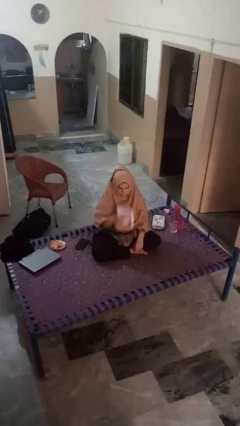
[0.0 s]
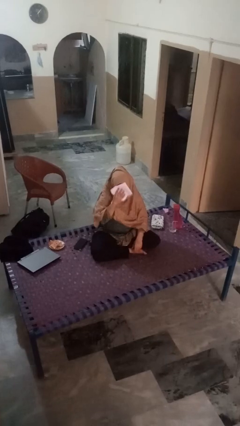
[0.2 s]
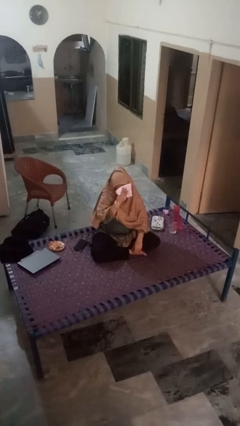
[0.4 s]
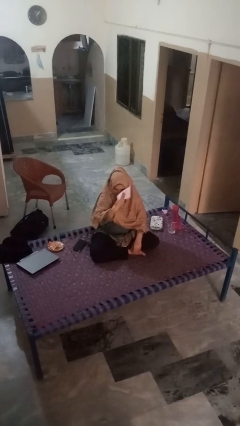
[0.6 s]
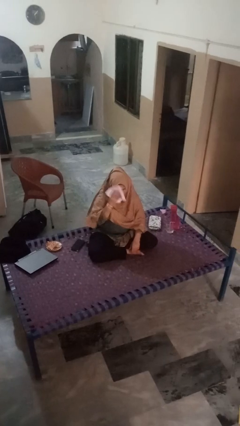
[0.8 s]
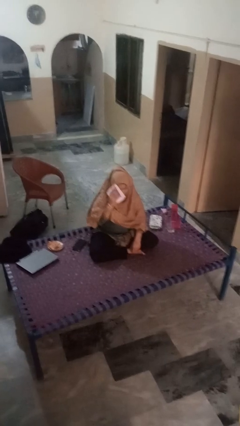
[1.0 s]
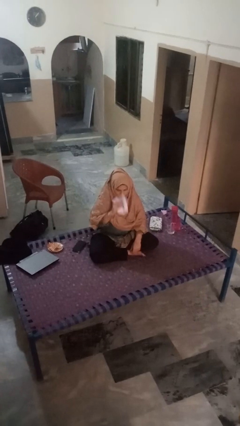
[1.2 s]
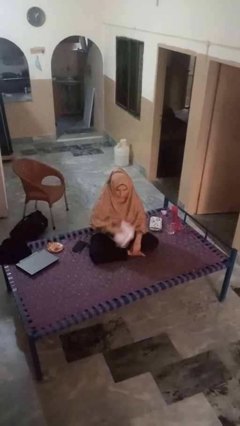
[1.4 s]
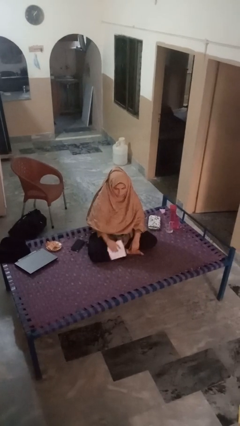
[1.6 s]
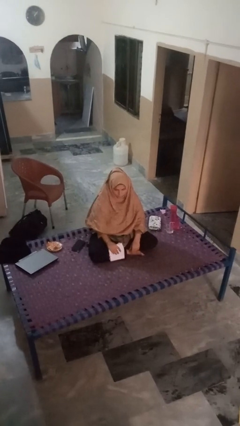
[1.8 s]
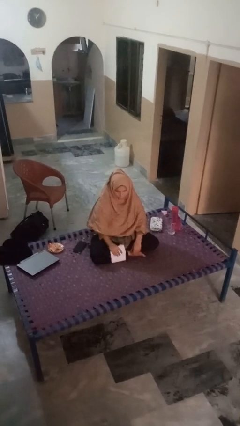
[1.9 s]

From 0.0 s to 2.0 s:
person wipes mouth with napkin

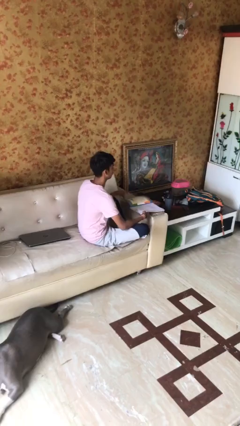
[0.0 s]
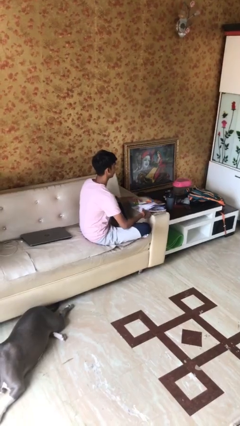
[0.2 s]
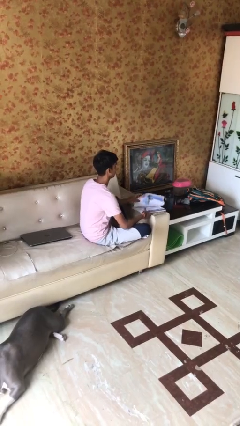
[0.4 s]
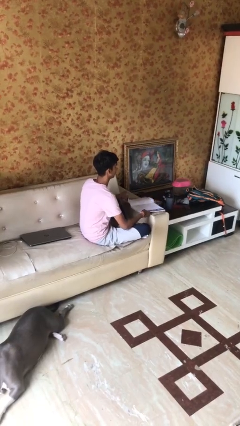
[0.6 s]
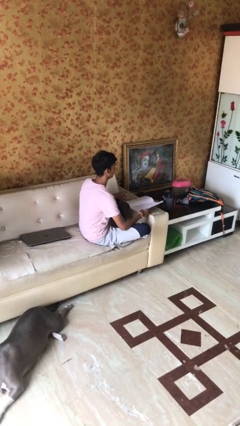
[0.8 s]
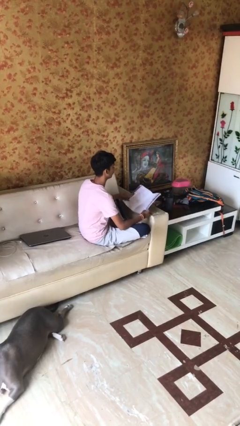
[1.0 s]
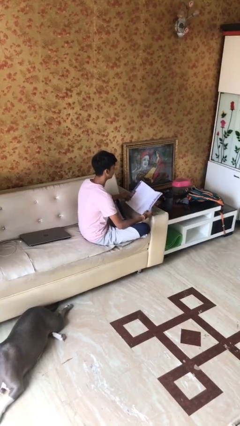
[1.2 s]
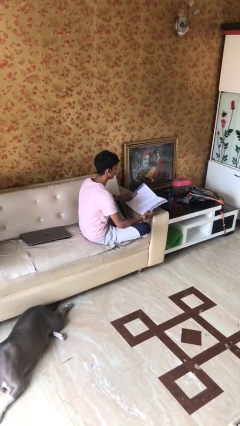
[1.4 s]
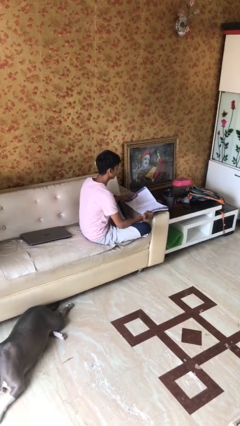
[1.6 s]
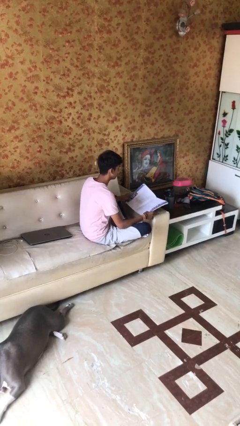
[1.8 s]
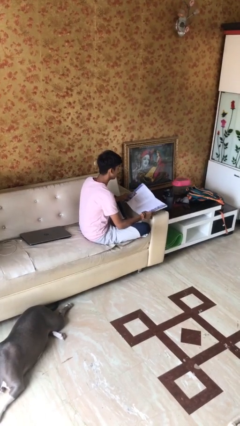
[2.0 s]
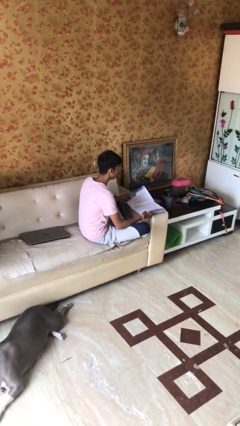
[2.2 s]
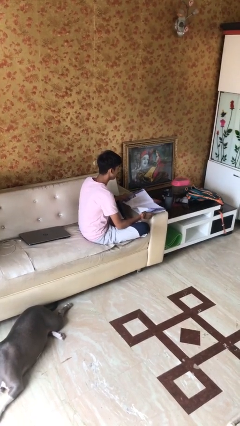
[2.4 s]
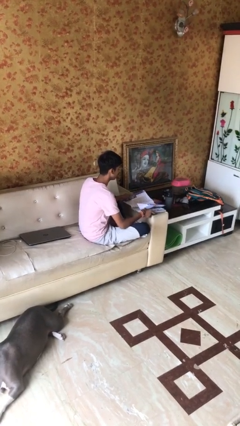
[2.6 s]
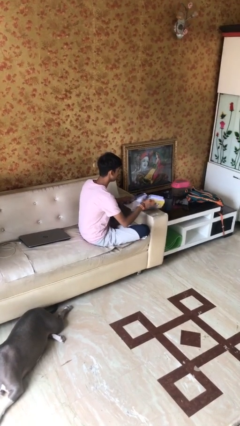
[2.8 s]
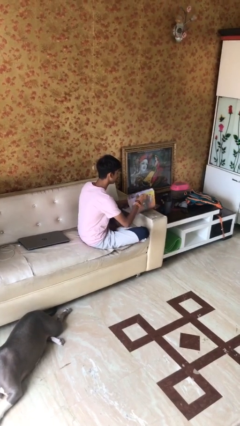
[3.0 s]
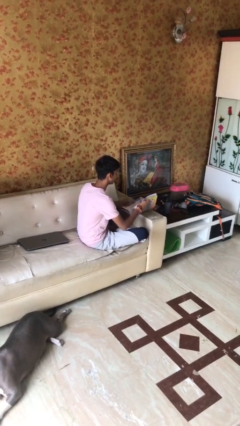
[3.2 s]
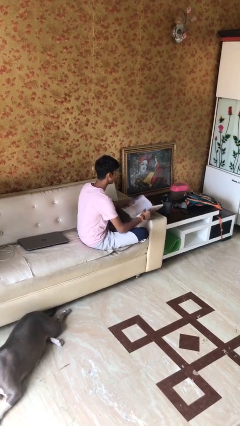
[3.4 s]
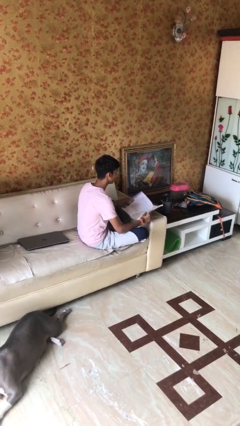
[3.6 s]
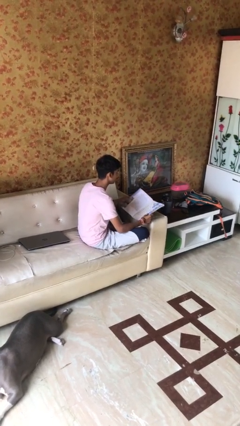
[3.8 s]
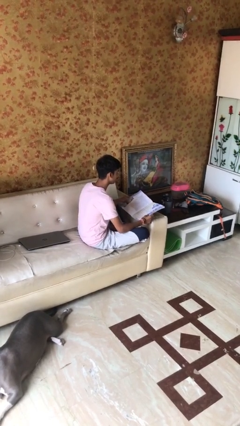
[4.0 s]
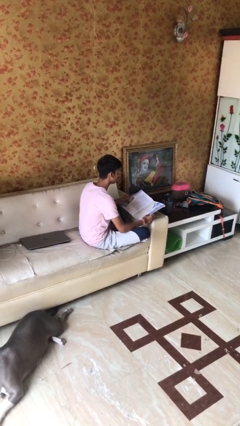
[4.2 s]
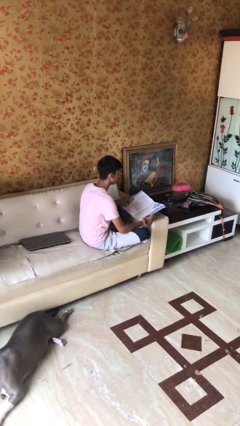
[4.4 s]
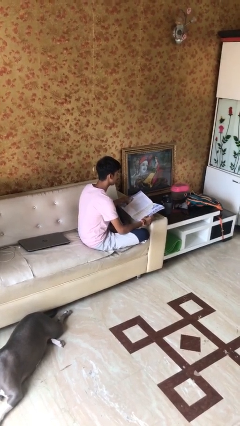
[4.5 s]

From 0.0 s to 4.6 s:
person reads magazine

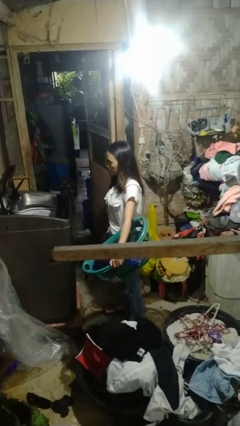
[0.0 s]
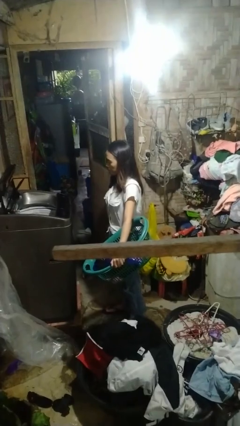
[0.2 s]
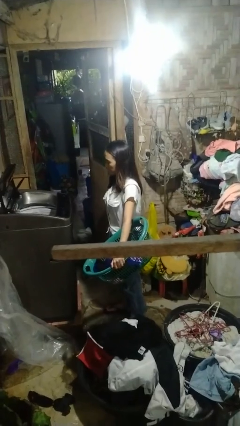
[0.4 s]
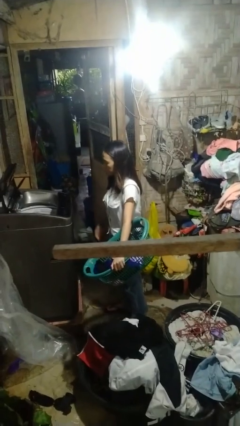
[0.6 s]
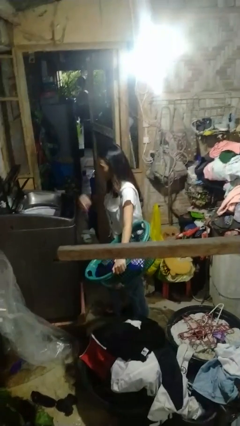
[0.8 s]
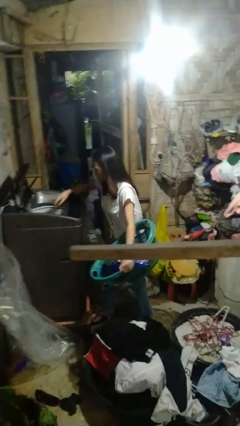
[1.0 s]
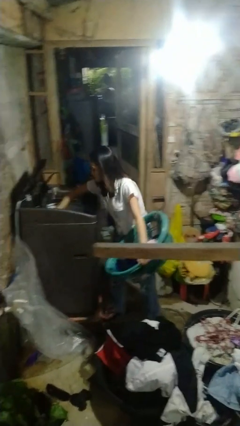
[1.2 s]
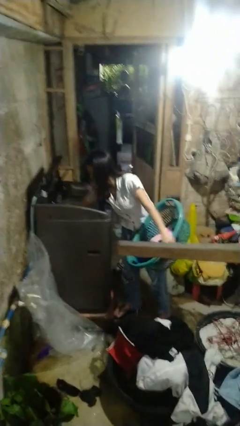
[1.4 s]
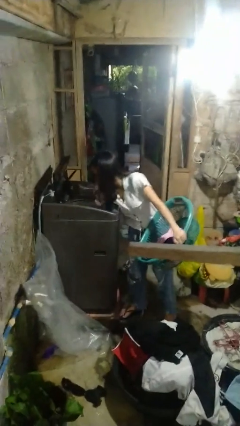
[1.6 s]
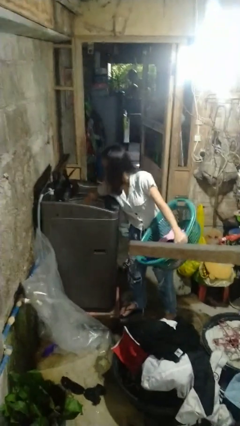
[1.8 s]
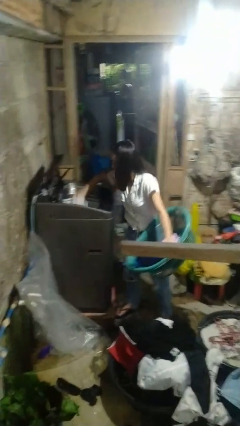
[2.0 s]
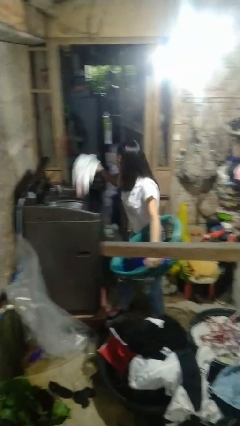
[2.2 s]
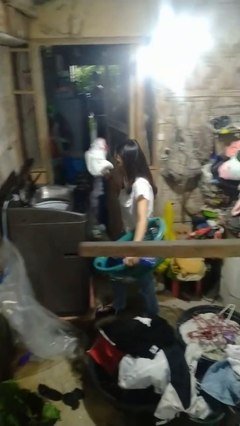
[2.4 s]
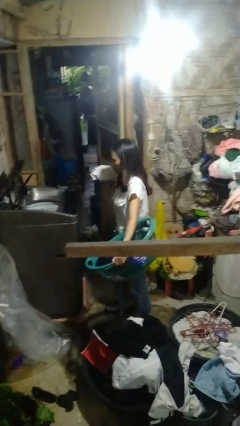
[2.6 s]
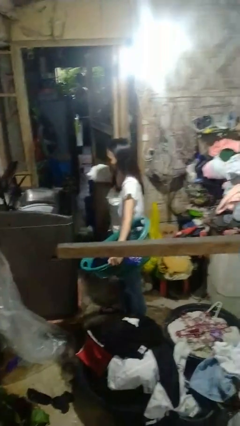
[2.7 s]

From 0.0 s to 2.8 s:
person unloads dryer

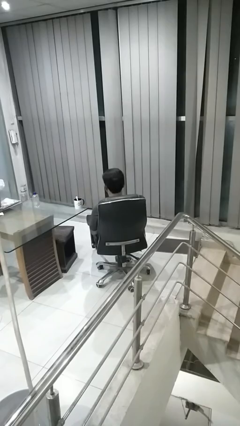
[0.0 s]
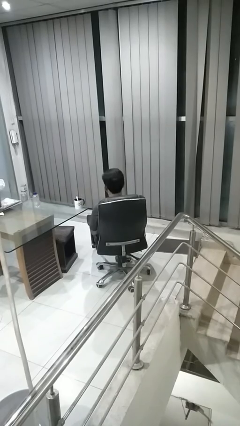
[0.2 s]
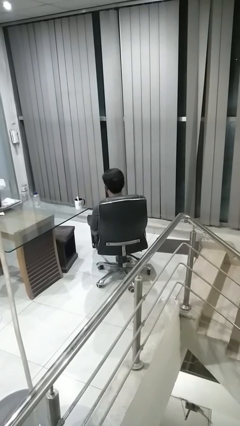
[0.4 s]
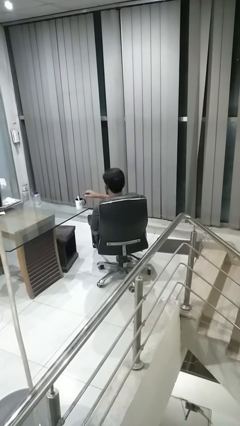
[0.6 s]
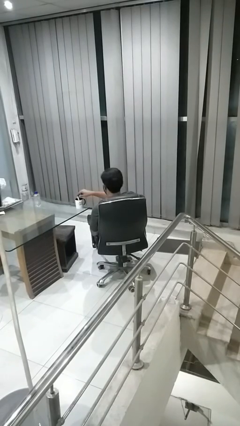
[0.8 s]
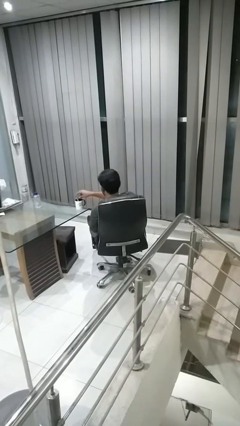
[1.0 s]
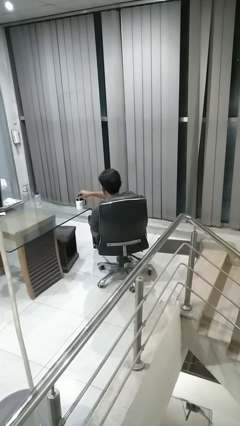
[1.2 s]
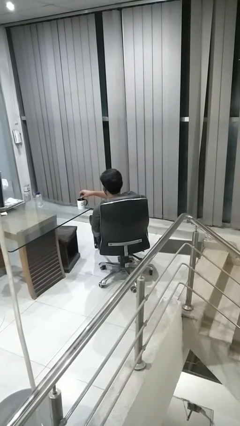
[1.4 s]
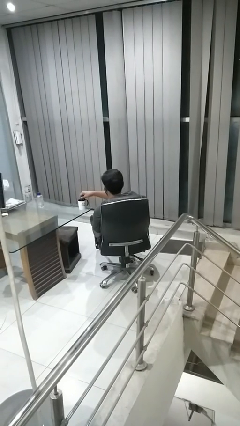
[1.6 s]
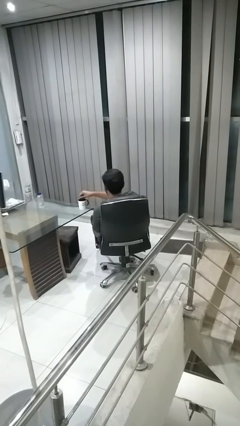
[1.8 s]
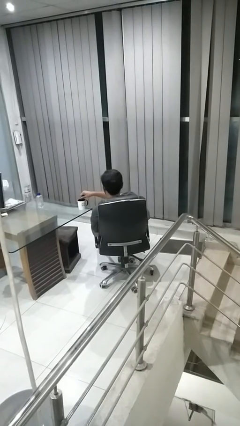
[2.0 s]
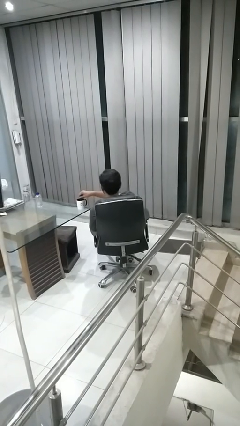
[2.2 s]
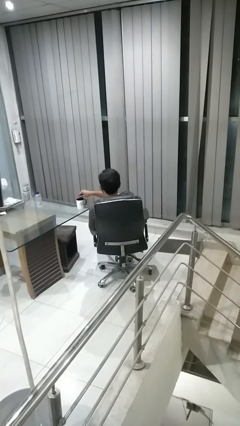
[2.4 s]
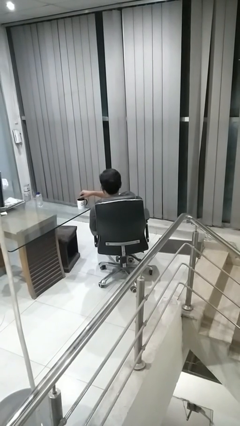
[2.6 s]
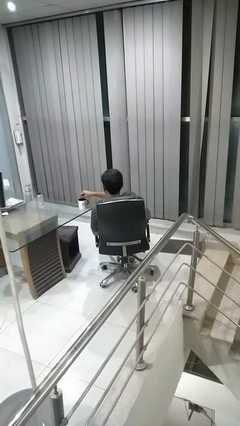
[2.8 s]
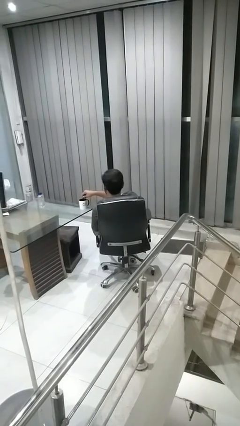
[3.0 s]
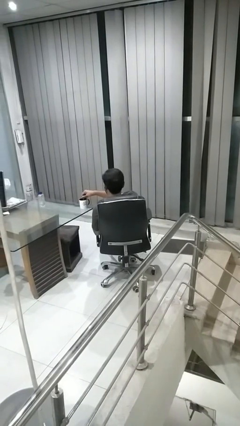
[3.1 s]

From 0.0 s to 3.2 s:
person stirs mug

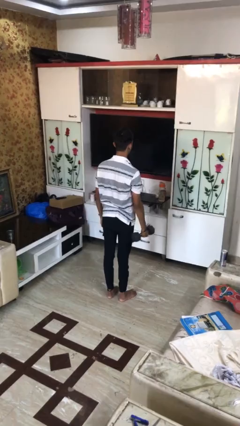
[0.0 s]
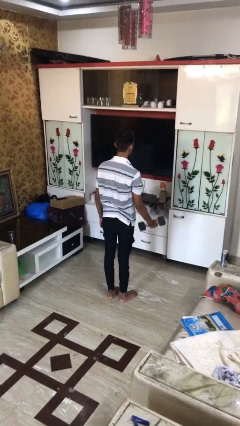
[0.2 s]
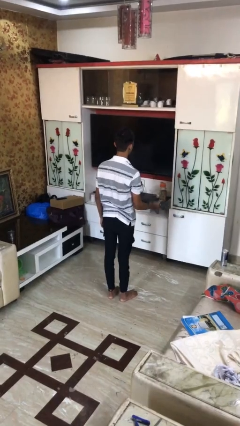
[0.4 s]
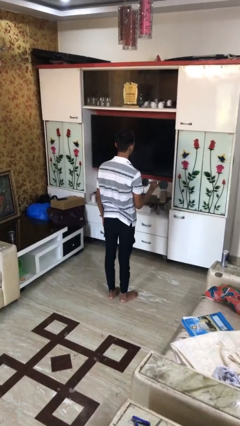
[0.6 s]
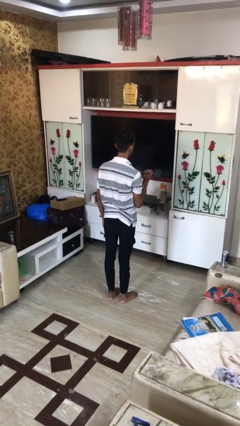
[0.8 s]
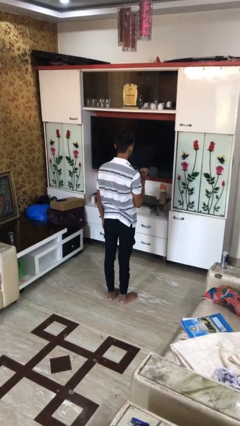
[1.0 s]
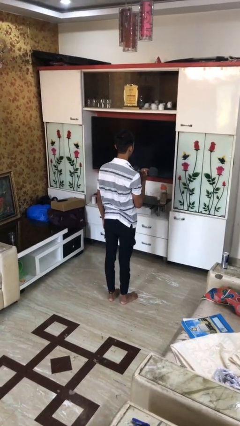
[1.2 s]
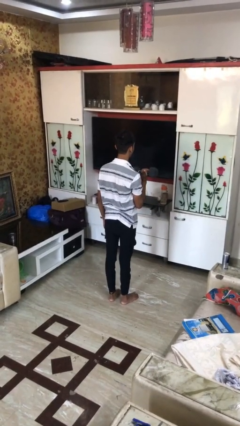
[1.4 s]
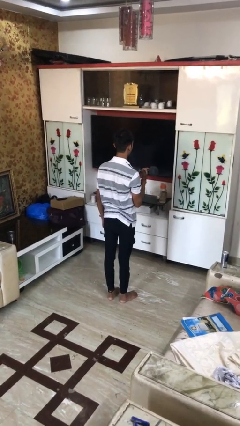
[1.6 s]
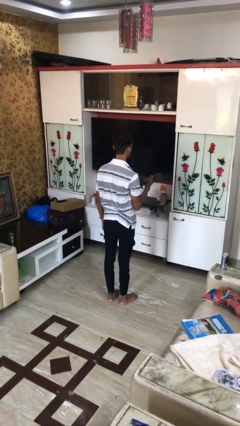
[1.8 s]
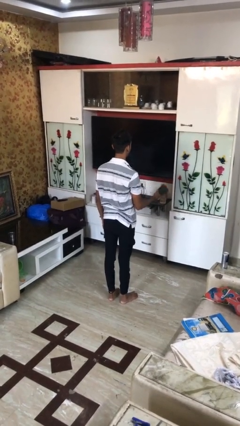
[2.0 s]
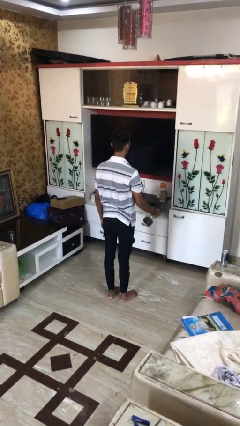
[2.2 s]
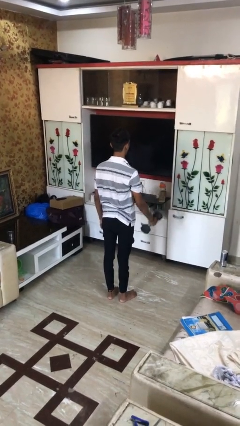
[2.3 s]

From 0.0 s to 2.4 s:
person lifts dumbbells

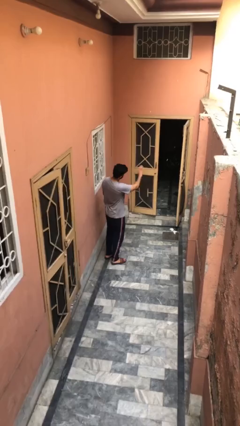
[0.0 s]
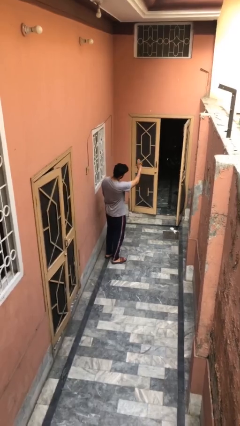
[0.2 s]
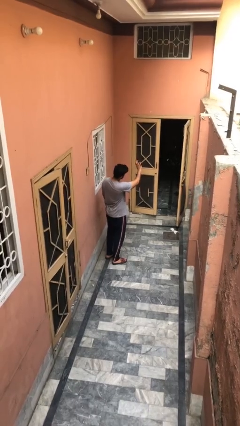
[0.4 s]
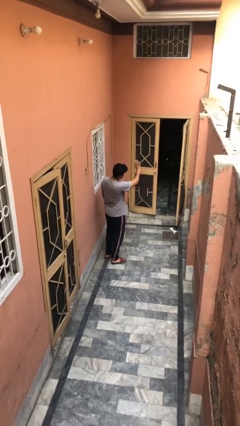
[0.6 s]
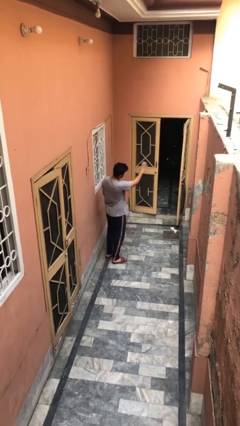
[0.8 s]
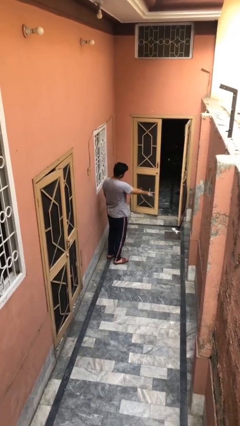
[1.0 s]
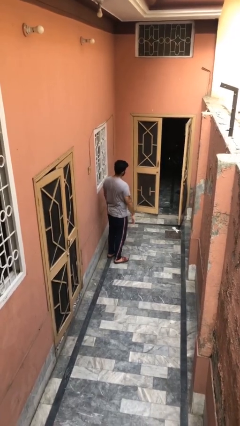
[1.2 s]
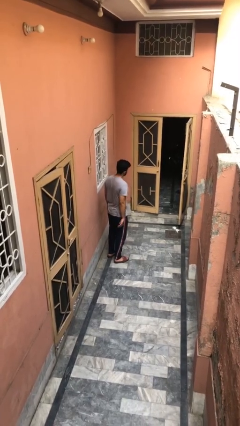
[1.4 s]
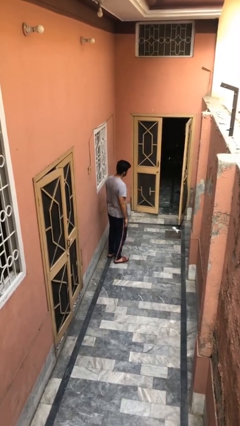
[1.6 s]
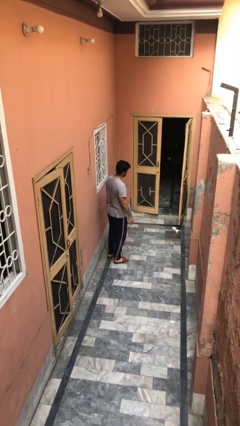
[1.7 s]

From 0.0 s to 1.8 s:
person waves at person

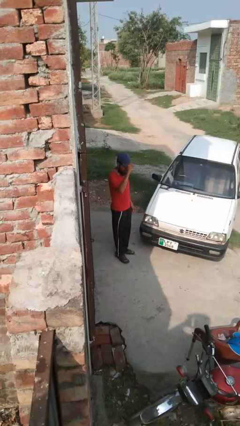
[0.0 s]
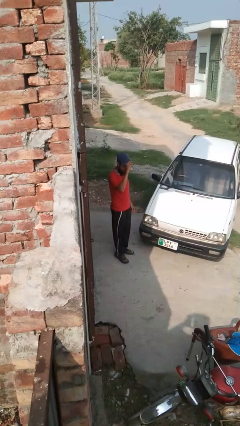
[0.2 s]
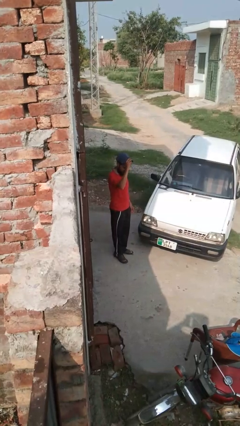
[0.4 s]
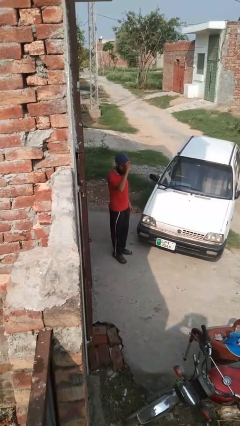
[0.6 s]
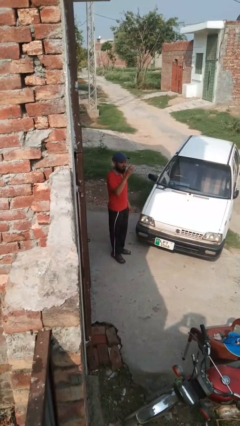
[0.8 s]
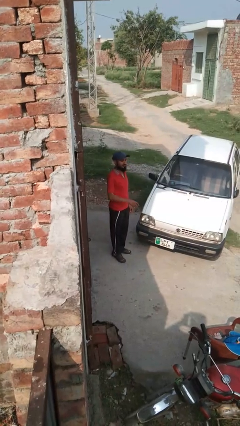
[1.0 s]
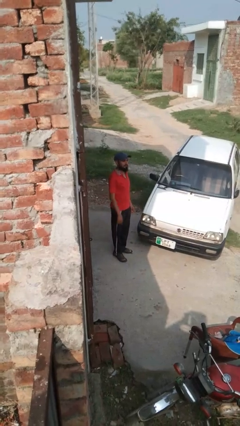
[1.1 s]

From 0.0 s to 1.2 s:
person puts on hat
